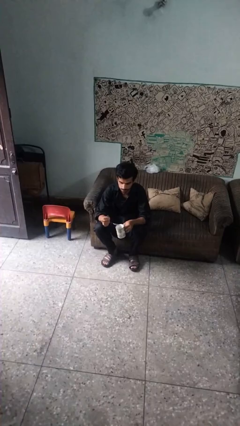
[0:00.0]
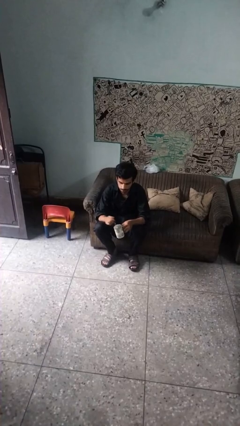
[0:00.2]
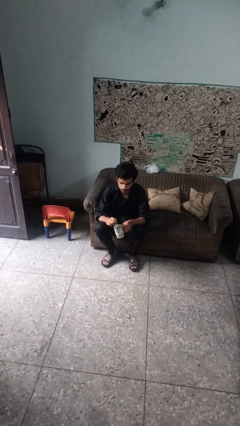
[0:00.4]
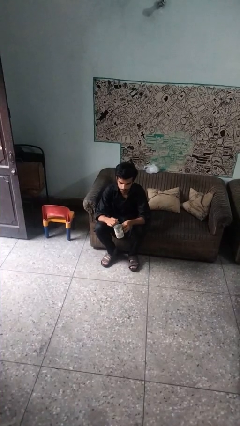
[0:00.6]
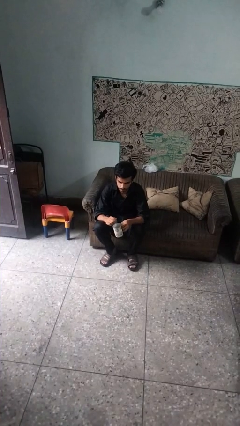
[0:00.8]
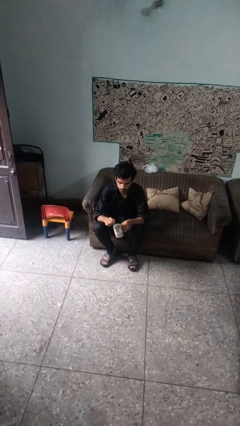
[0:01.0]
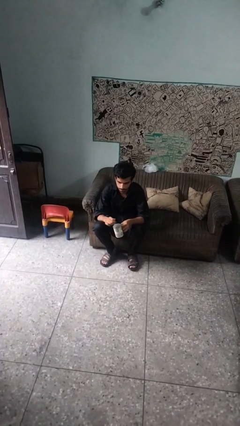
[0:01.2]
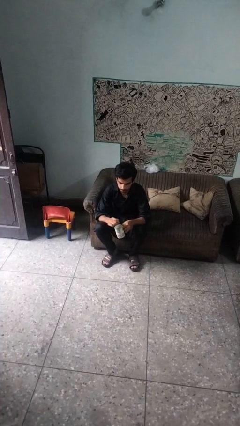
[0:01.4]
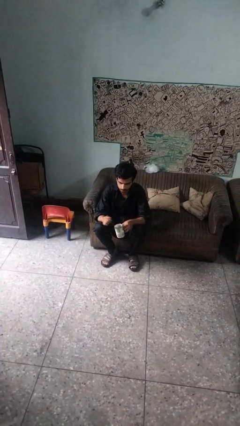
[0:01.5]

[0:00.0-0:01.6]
person stirs mug

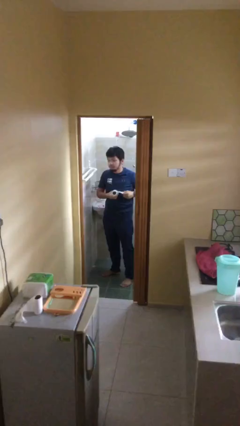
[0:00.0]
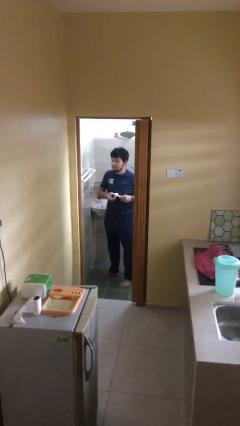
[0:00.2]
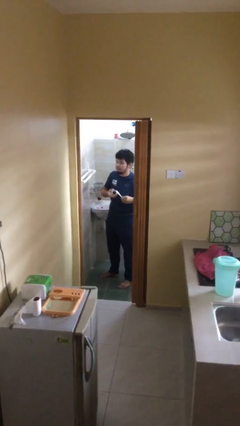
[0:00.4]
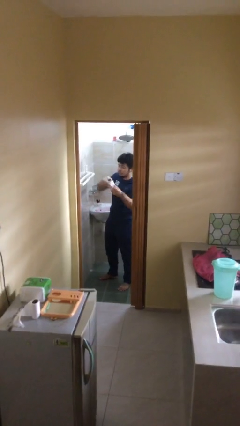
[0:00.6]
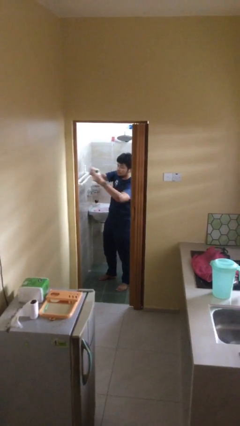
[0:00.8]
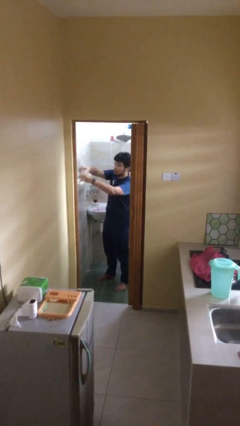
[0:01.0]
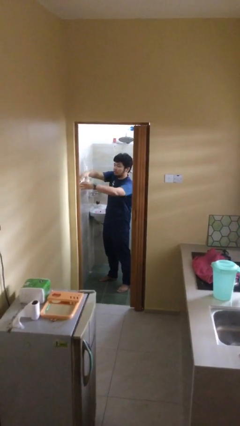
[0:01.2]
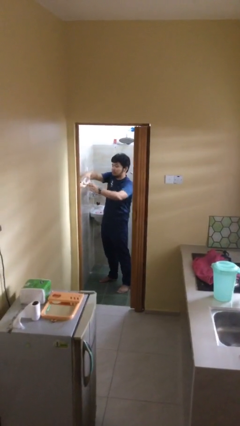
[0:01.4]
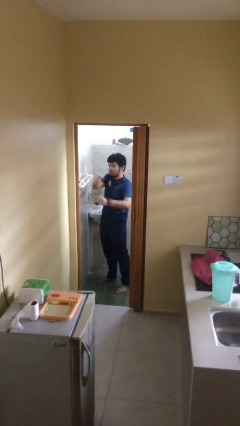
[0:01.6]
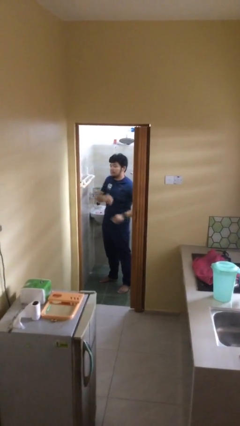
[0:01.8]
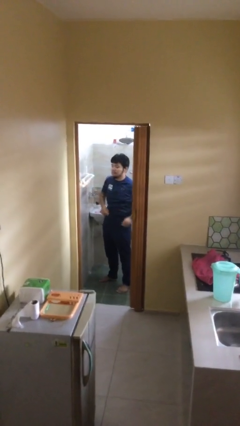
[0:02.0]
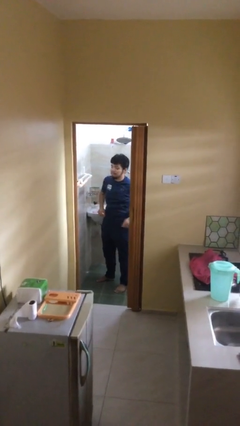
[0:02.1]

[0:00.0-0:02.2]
person puts down object on countertop

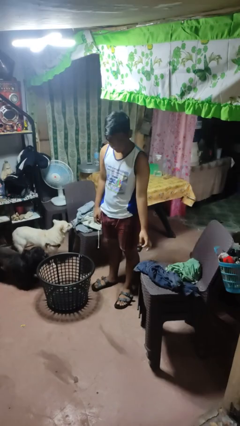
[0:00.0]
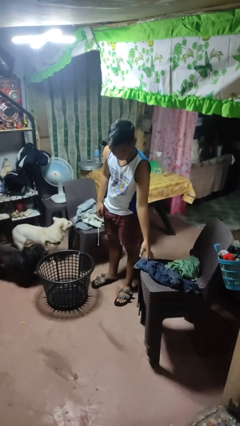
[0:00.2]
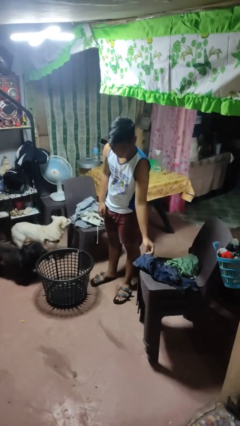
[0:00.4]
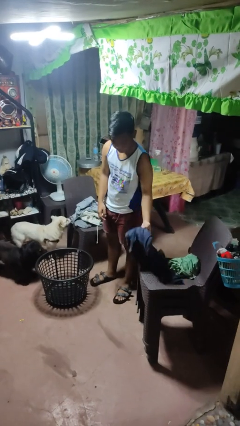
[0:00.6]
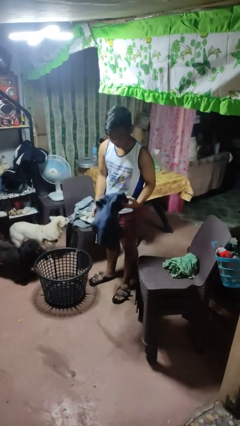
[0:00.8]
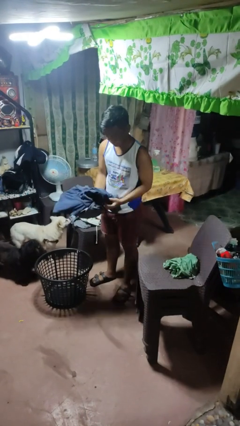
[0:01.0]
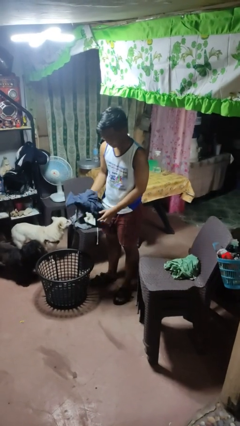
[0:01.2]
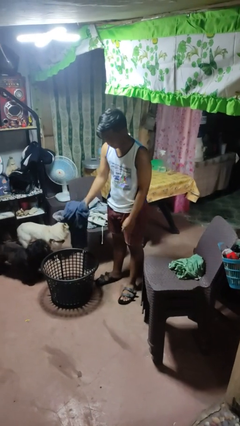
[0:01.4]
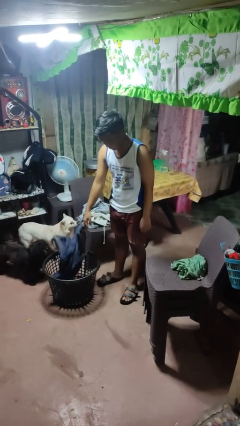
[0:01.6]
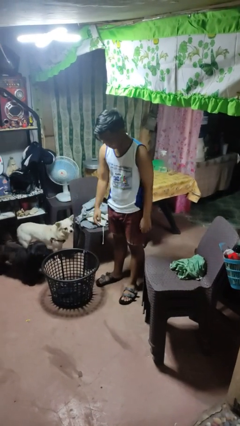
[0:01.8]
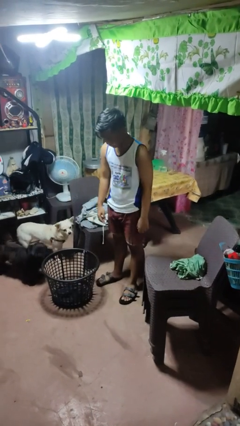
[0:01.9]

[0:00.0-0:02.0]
person puts object into basket

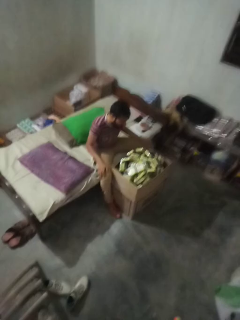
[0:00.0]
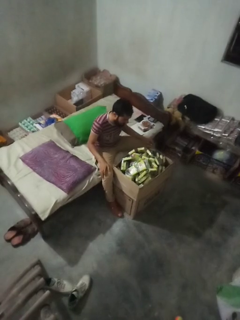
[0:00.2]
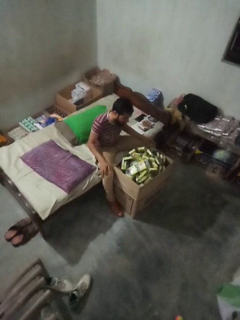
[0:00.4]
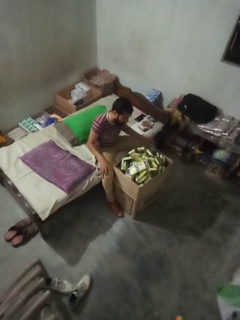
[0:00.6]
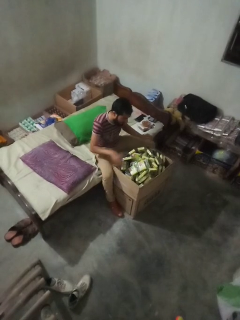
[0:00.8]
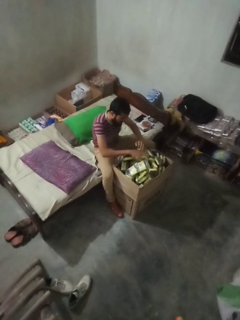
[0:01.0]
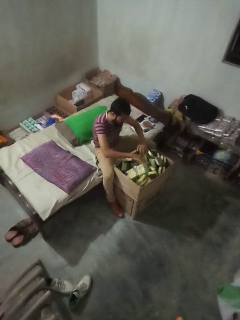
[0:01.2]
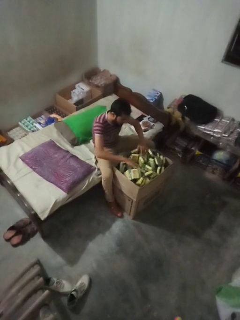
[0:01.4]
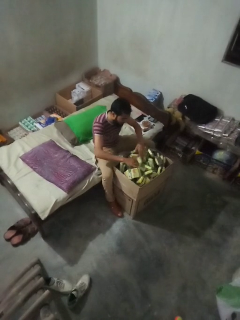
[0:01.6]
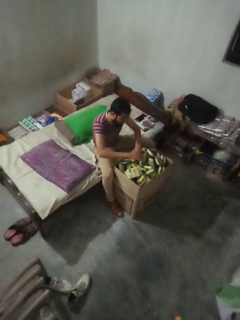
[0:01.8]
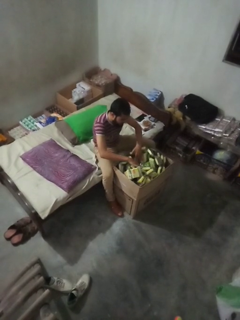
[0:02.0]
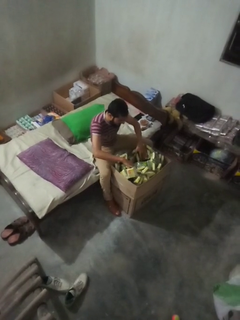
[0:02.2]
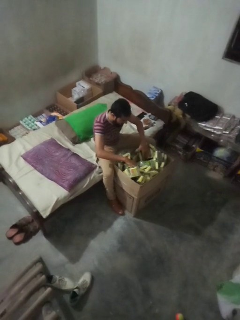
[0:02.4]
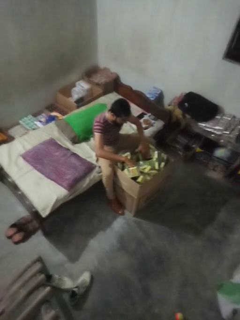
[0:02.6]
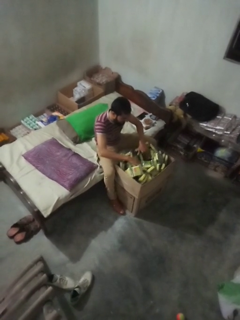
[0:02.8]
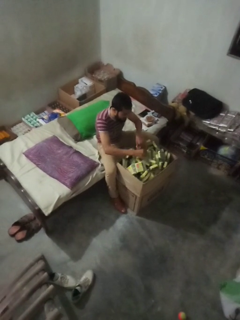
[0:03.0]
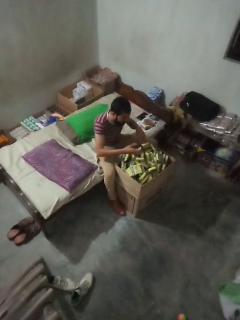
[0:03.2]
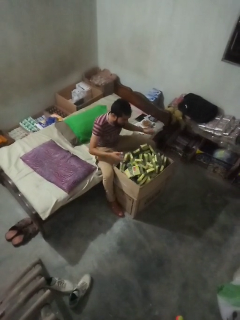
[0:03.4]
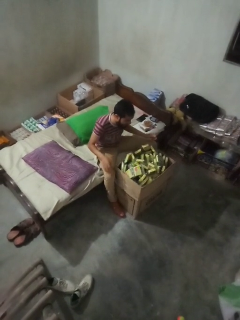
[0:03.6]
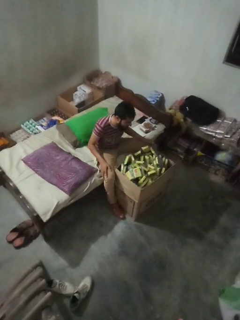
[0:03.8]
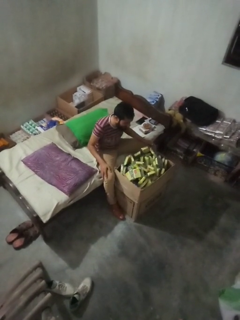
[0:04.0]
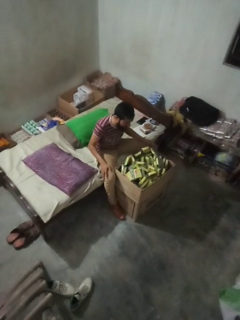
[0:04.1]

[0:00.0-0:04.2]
person searches in box

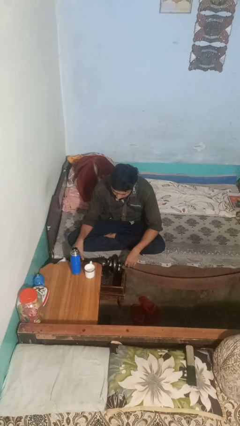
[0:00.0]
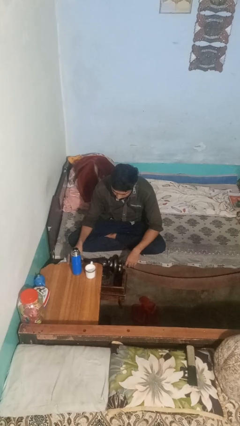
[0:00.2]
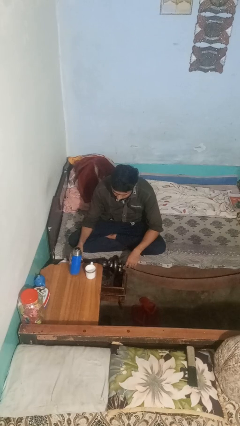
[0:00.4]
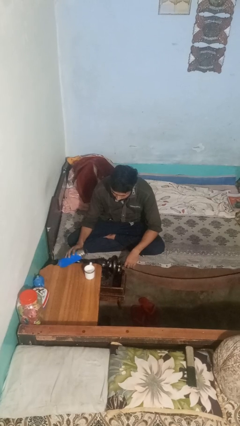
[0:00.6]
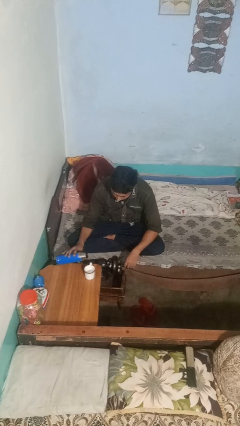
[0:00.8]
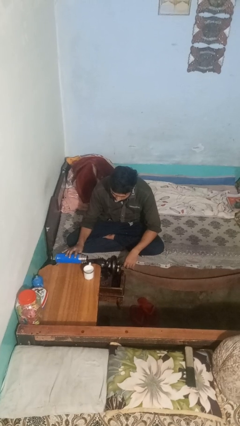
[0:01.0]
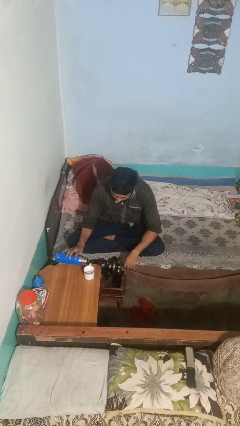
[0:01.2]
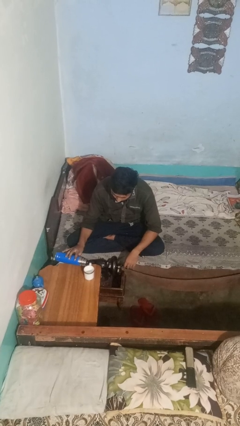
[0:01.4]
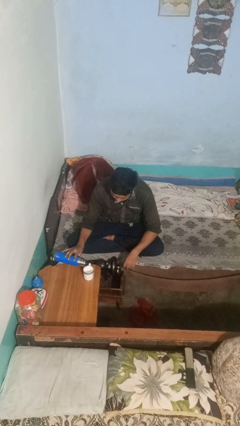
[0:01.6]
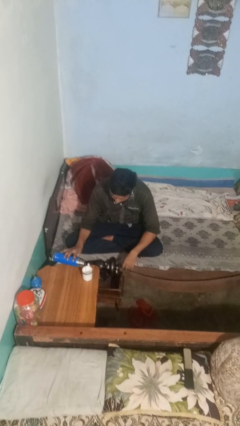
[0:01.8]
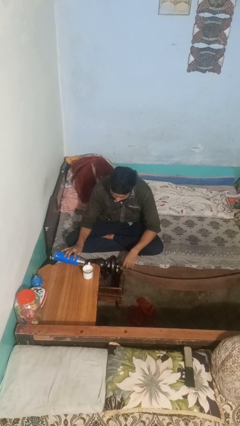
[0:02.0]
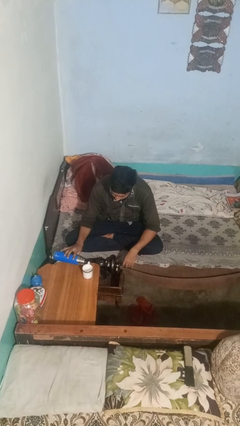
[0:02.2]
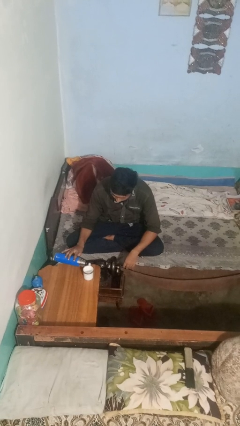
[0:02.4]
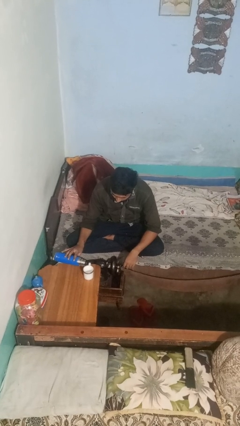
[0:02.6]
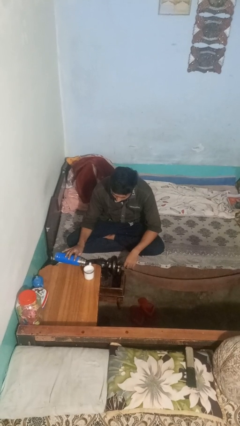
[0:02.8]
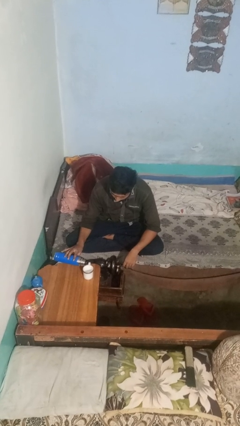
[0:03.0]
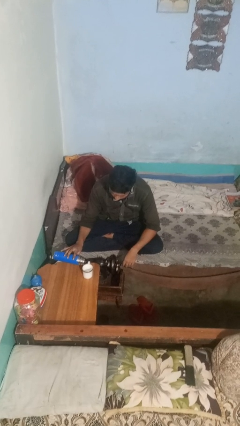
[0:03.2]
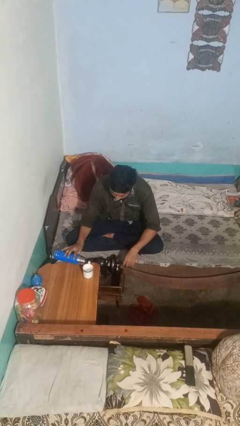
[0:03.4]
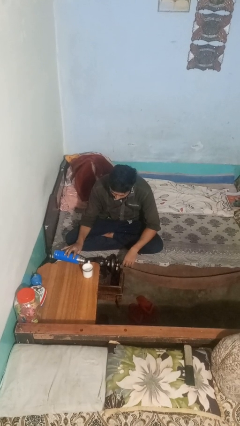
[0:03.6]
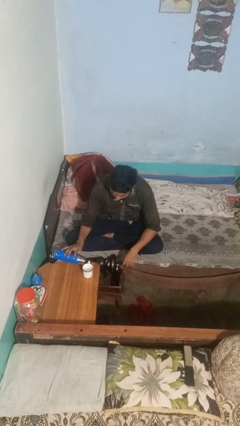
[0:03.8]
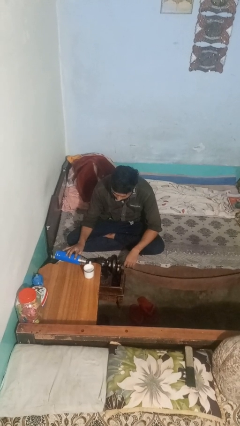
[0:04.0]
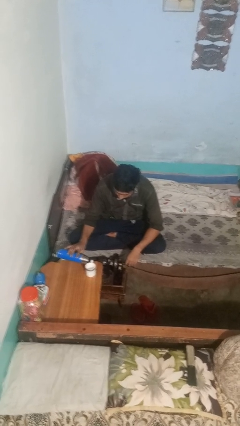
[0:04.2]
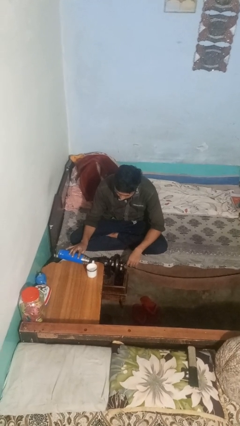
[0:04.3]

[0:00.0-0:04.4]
person pours liquid into cup

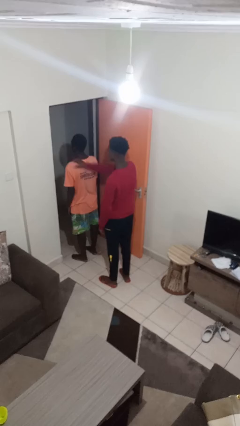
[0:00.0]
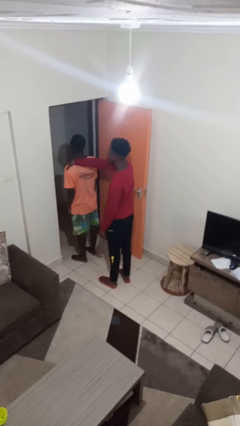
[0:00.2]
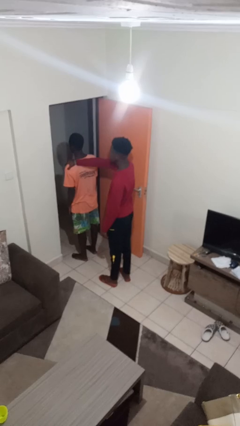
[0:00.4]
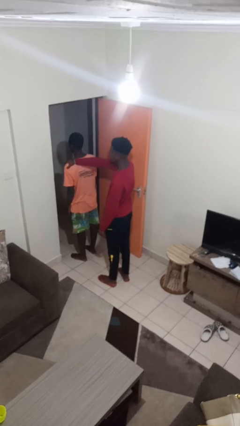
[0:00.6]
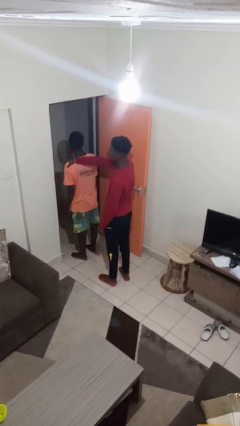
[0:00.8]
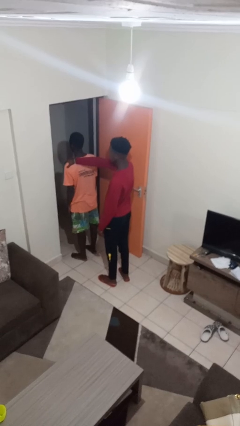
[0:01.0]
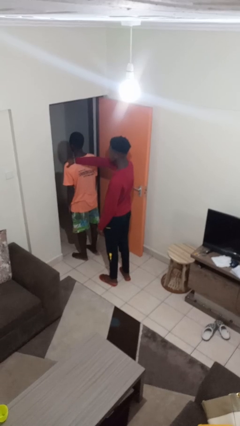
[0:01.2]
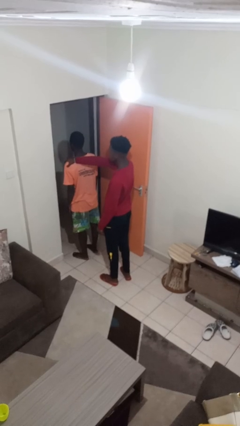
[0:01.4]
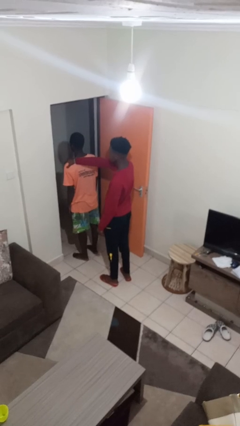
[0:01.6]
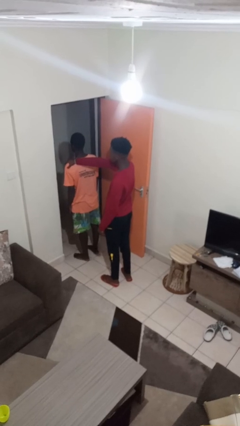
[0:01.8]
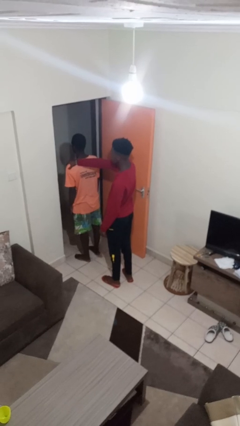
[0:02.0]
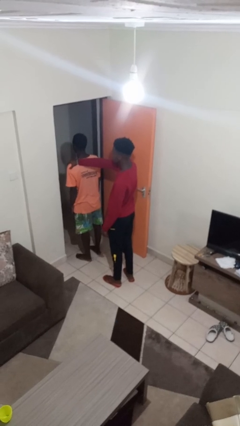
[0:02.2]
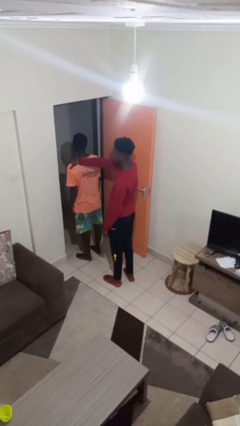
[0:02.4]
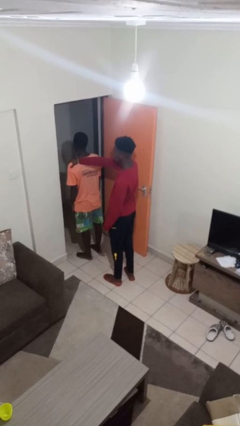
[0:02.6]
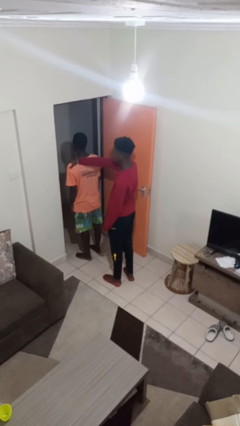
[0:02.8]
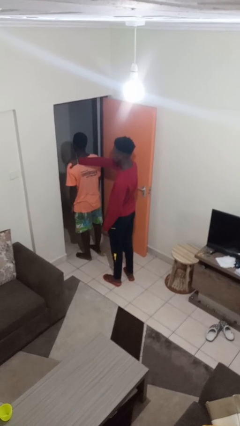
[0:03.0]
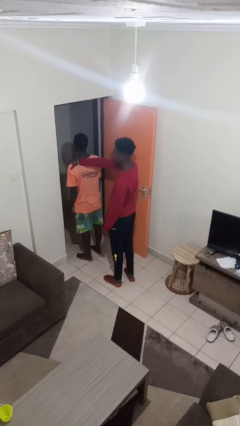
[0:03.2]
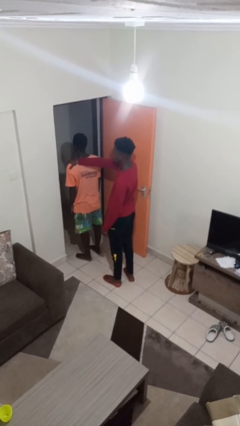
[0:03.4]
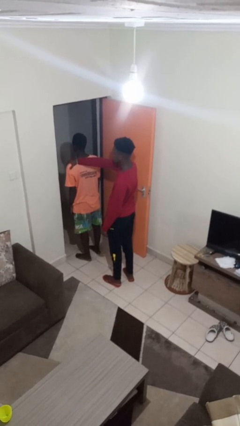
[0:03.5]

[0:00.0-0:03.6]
person grabs person by shoulder
